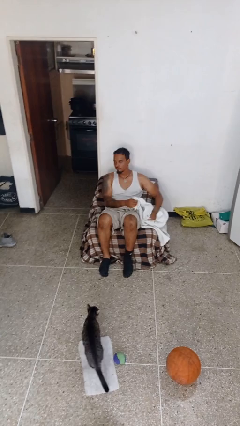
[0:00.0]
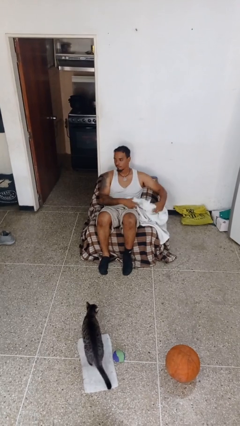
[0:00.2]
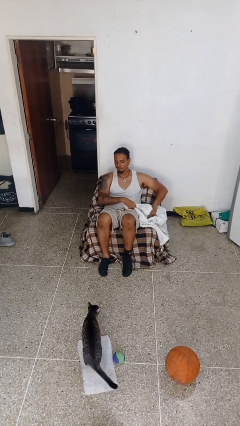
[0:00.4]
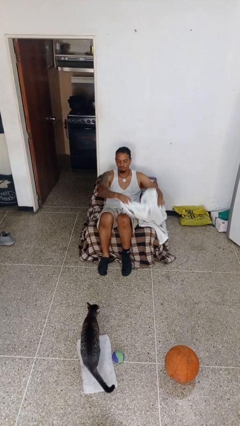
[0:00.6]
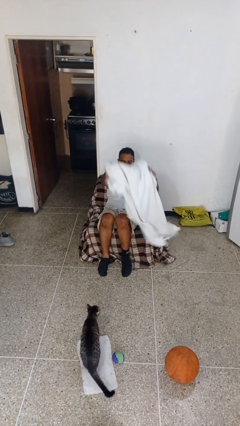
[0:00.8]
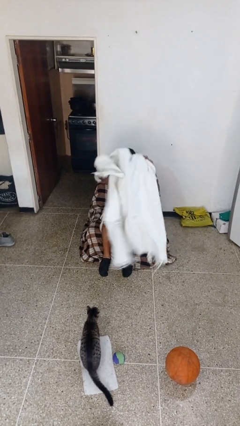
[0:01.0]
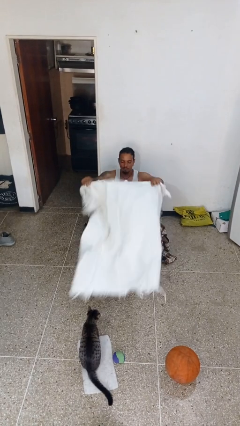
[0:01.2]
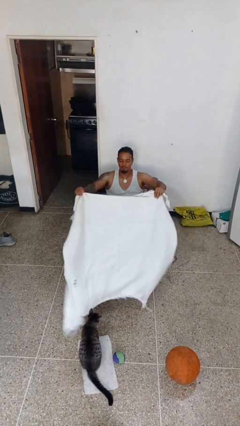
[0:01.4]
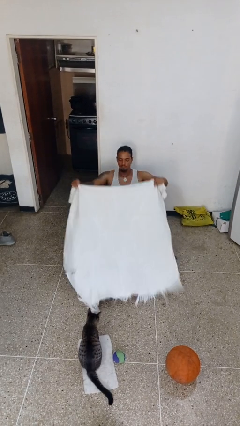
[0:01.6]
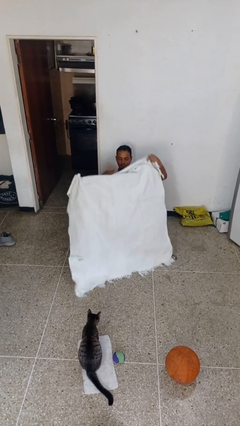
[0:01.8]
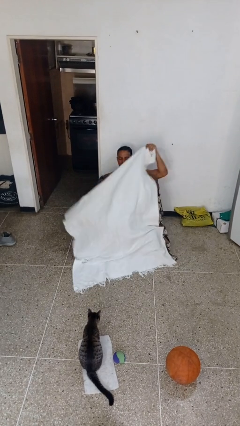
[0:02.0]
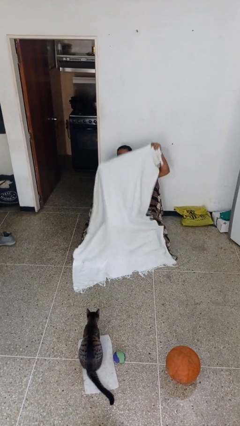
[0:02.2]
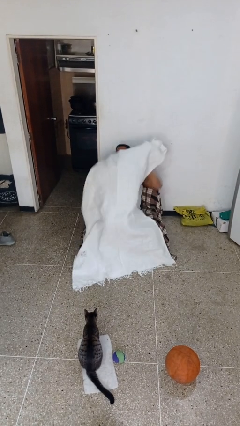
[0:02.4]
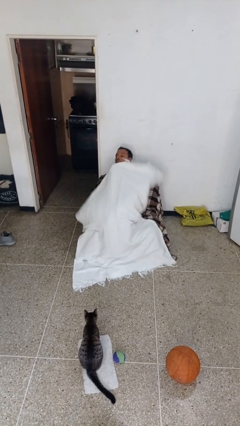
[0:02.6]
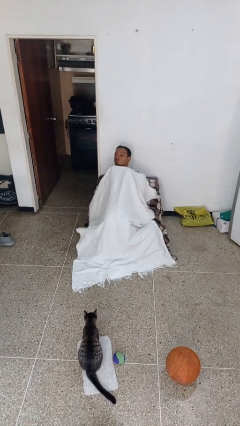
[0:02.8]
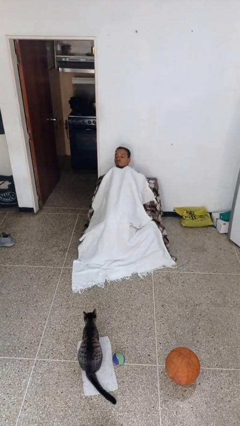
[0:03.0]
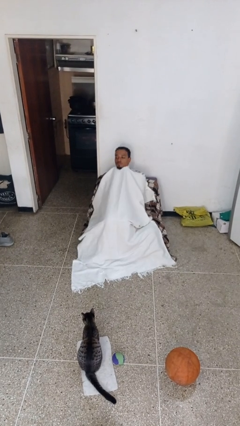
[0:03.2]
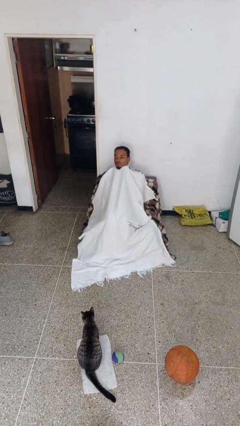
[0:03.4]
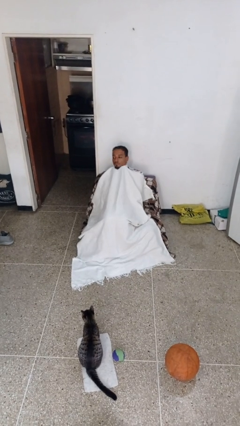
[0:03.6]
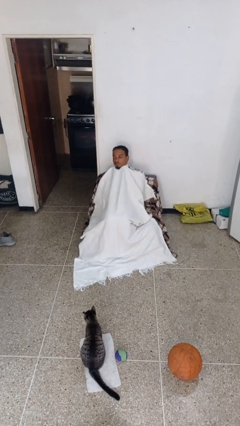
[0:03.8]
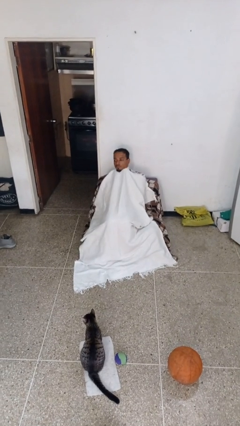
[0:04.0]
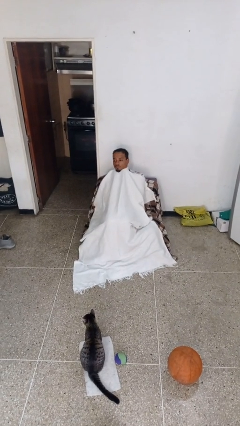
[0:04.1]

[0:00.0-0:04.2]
person covers with blanket

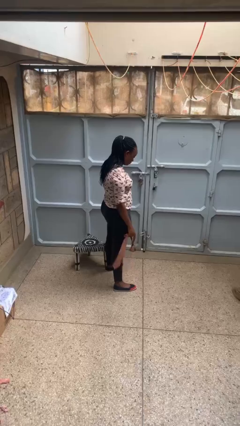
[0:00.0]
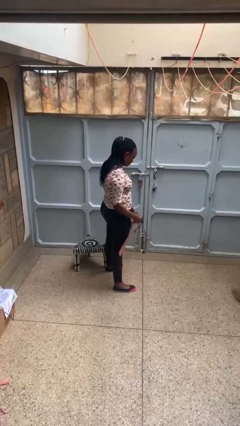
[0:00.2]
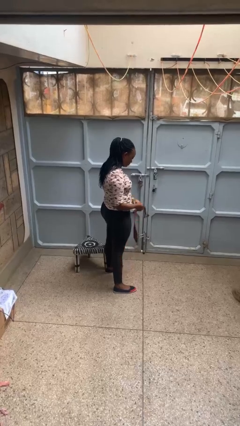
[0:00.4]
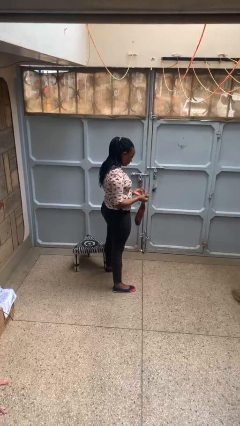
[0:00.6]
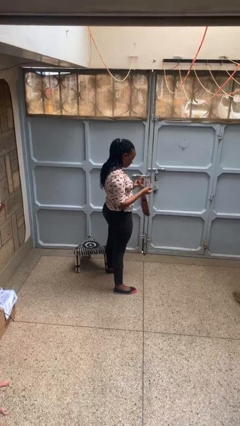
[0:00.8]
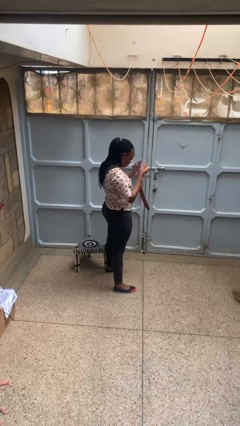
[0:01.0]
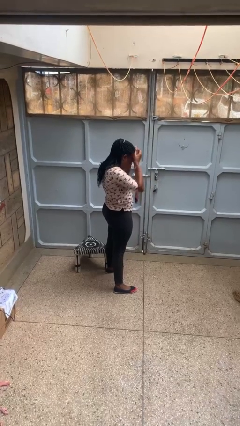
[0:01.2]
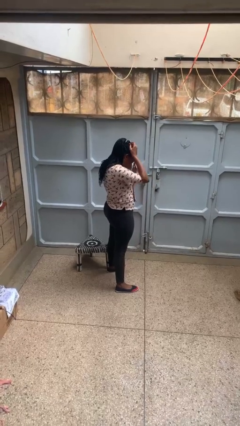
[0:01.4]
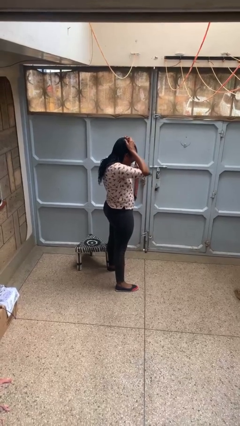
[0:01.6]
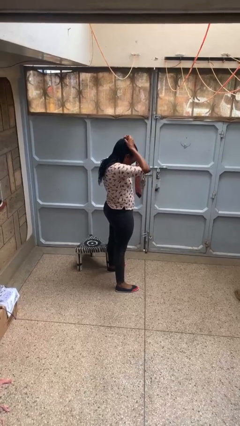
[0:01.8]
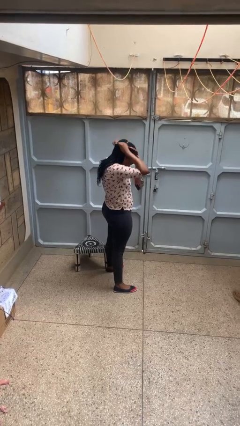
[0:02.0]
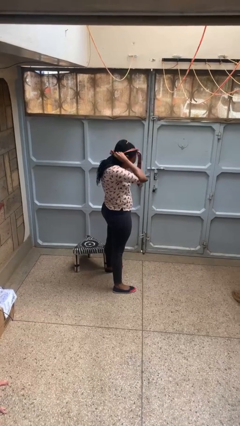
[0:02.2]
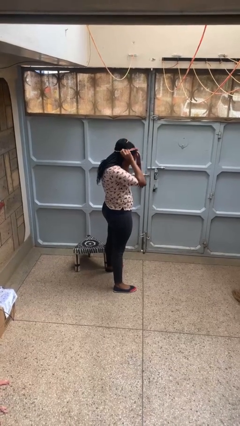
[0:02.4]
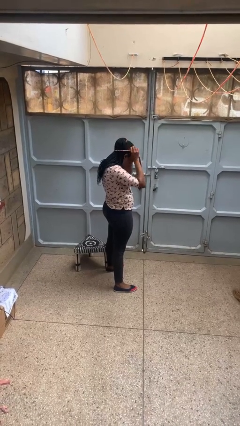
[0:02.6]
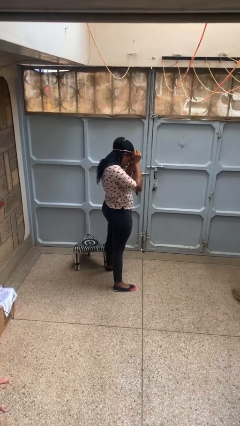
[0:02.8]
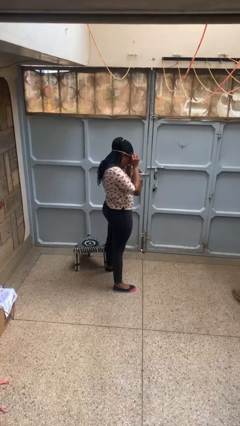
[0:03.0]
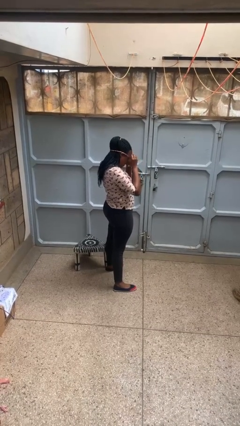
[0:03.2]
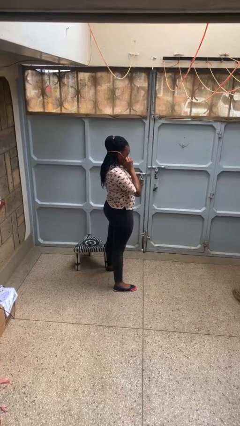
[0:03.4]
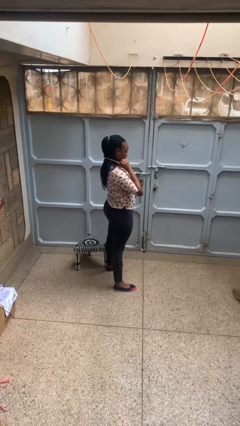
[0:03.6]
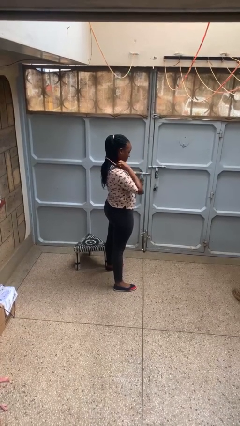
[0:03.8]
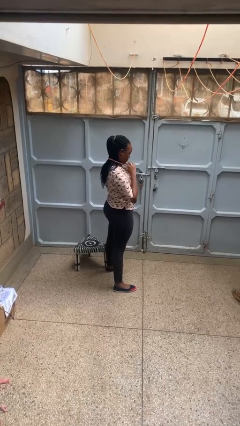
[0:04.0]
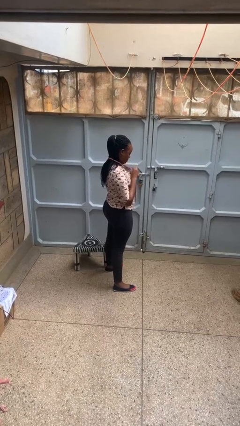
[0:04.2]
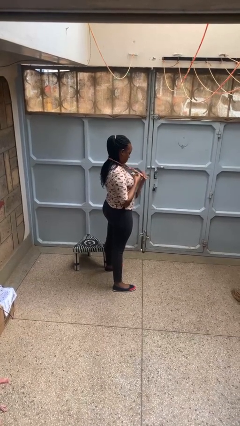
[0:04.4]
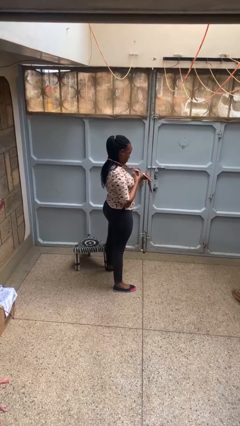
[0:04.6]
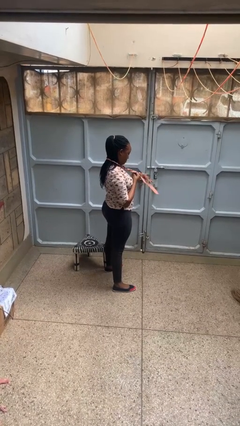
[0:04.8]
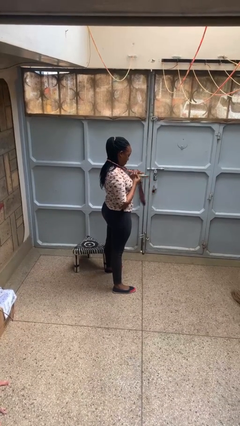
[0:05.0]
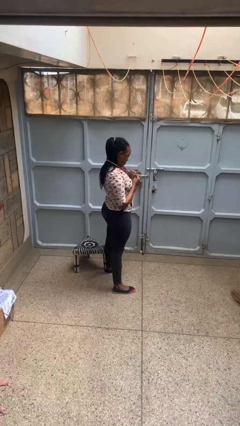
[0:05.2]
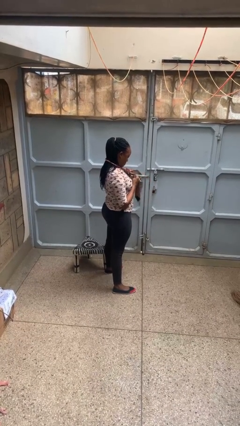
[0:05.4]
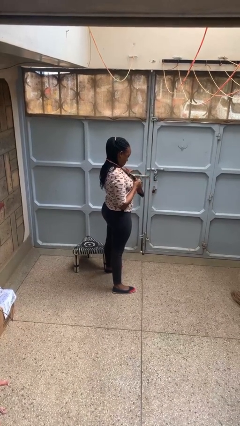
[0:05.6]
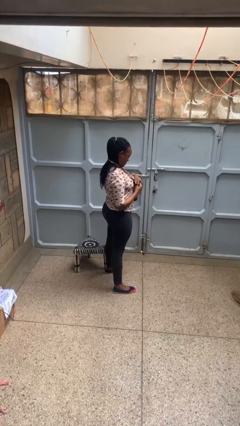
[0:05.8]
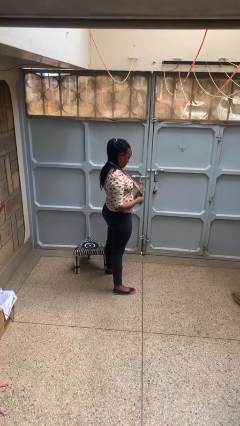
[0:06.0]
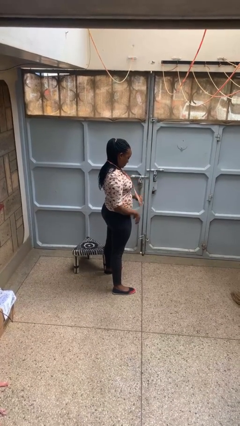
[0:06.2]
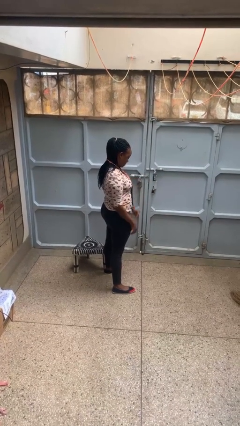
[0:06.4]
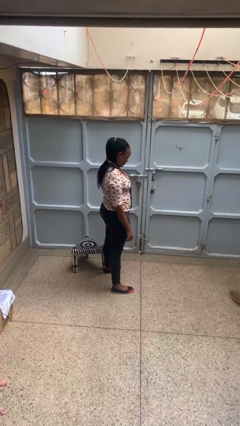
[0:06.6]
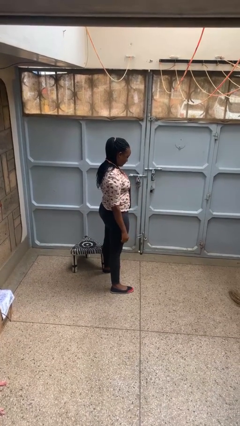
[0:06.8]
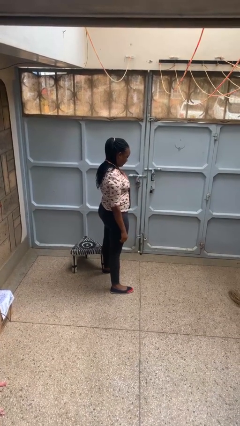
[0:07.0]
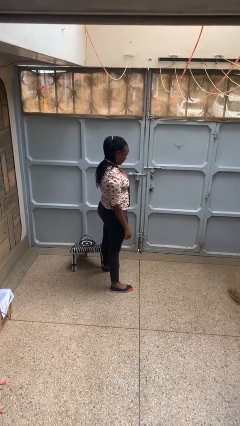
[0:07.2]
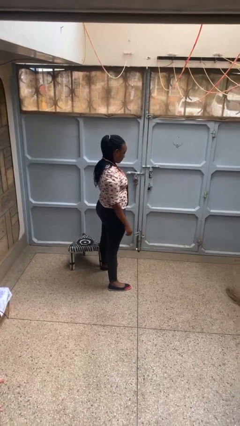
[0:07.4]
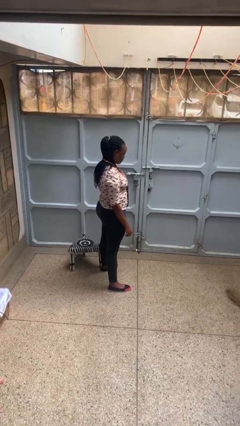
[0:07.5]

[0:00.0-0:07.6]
person puts on necktie

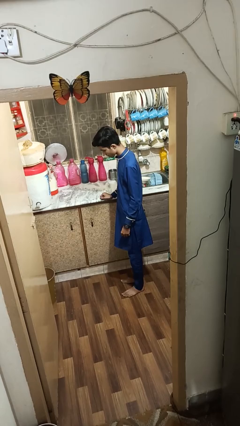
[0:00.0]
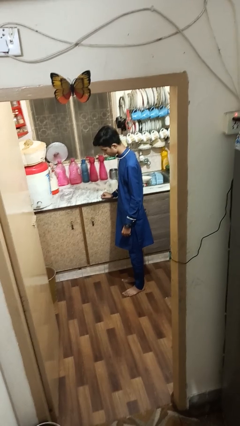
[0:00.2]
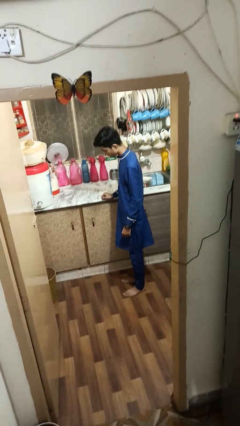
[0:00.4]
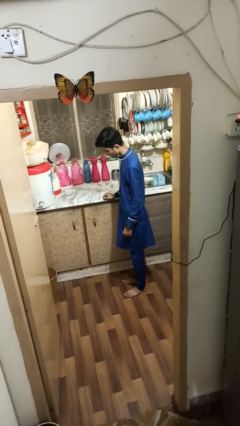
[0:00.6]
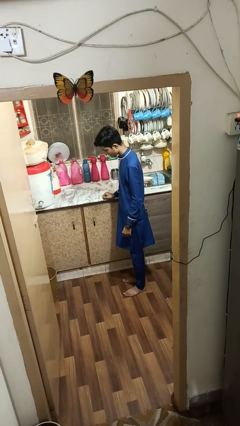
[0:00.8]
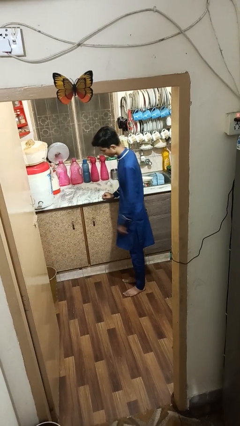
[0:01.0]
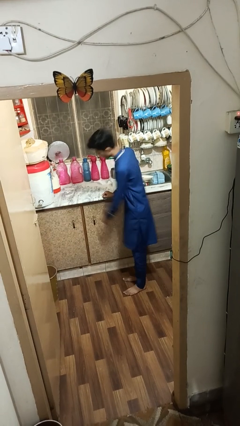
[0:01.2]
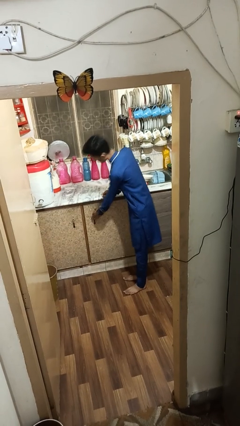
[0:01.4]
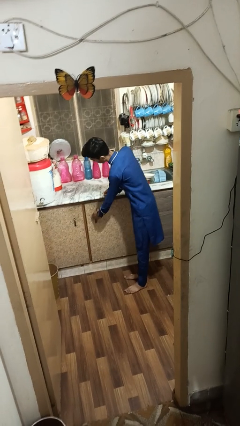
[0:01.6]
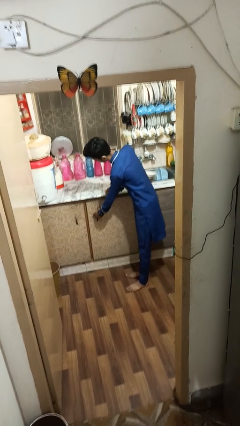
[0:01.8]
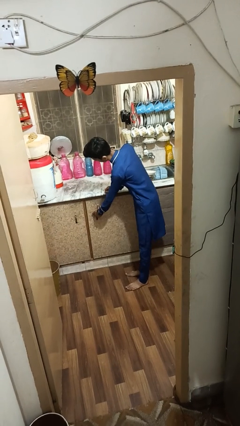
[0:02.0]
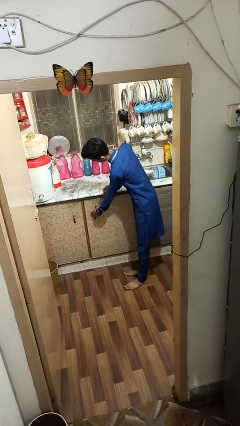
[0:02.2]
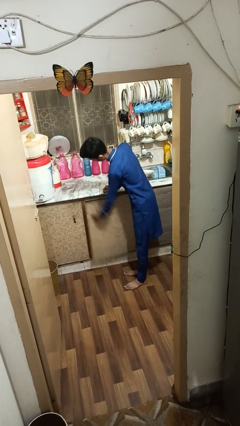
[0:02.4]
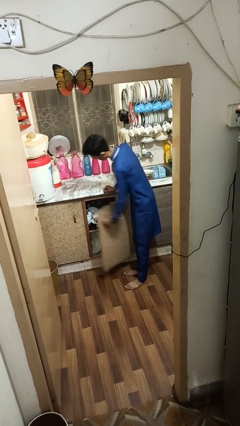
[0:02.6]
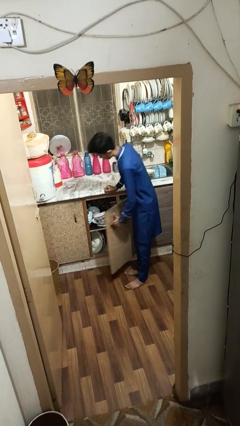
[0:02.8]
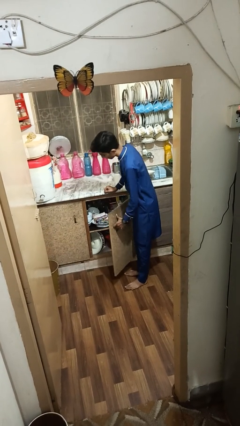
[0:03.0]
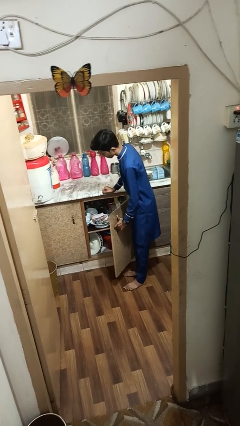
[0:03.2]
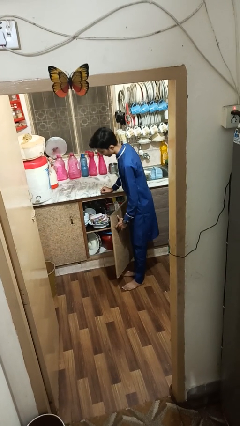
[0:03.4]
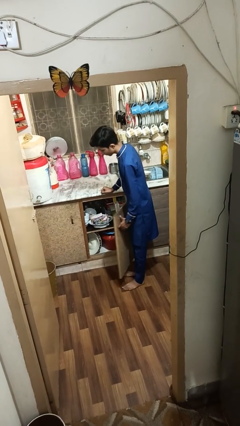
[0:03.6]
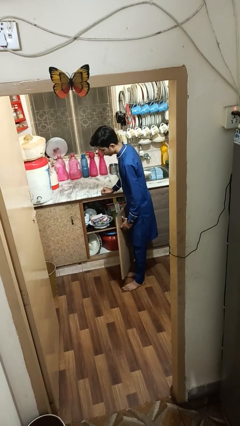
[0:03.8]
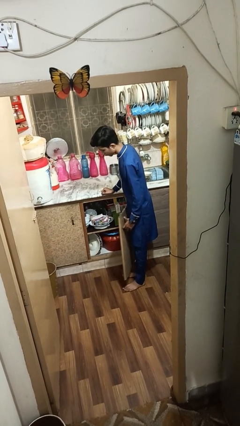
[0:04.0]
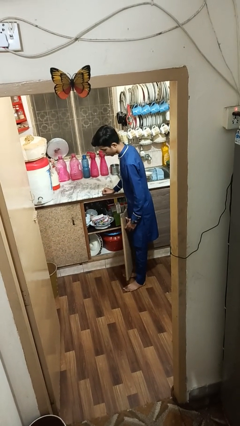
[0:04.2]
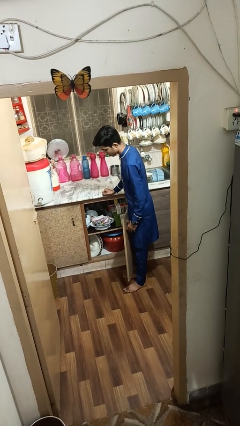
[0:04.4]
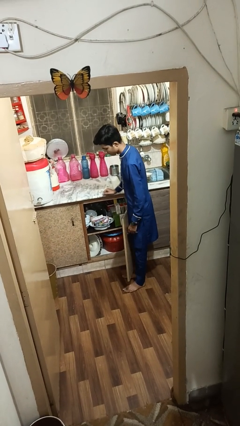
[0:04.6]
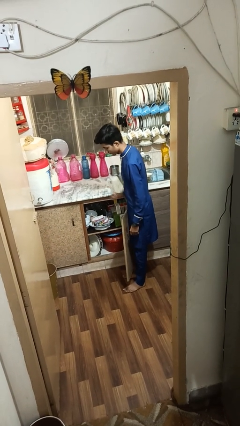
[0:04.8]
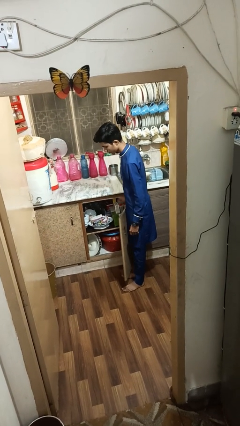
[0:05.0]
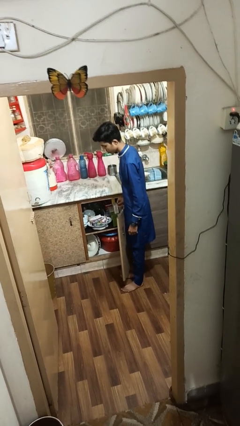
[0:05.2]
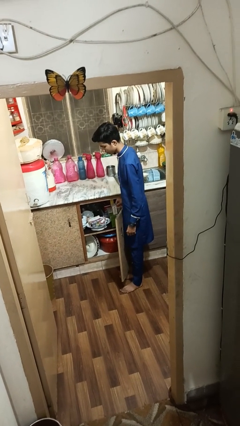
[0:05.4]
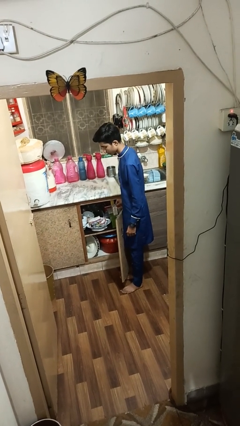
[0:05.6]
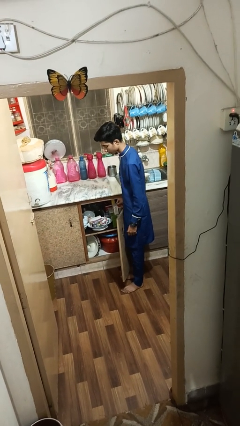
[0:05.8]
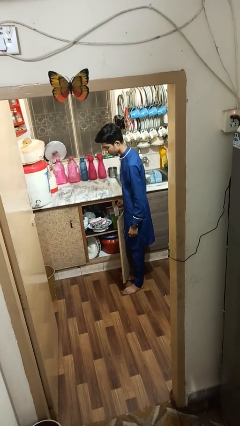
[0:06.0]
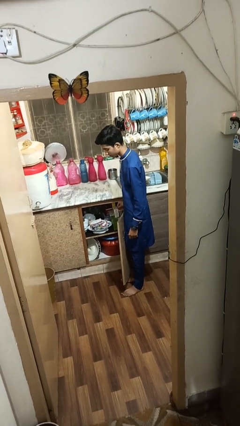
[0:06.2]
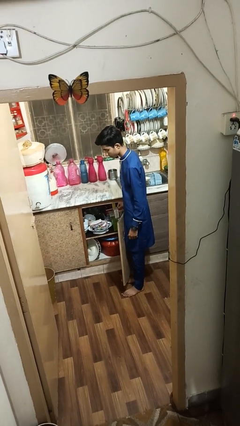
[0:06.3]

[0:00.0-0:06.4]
person opens cabinet
